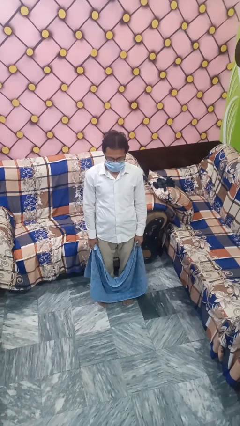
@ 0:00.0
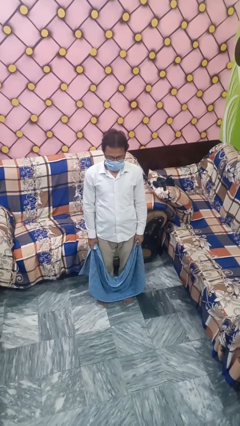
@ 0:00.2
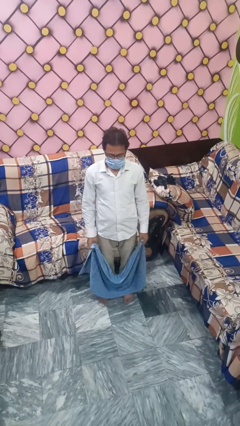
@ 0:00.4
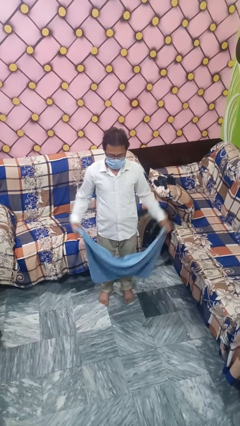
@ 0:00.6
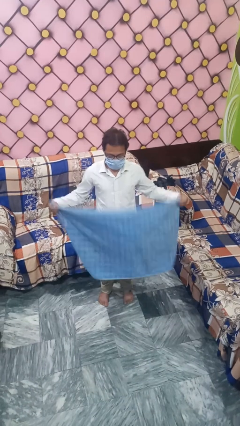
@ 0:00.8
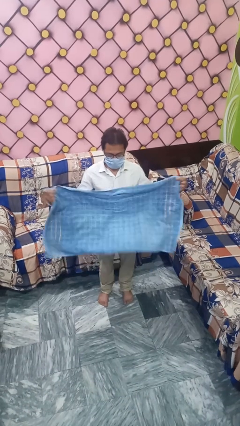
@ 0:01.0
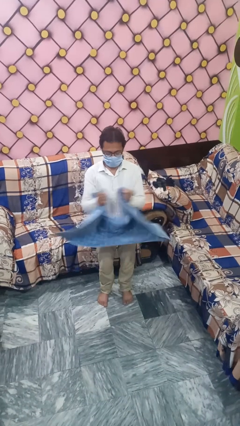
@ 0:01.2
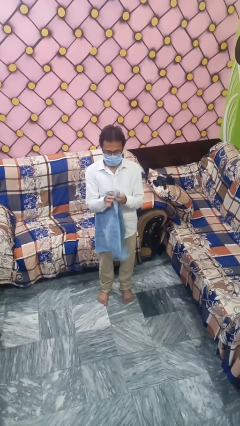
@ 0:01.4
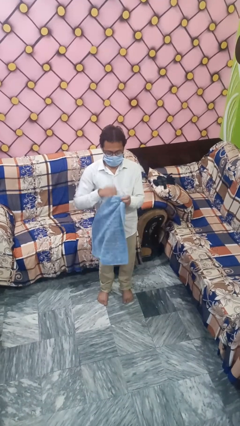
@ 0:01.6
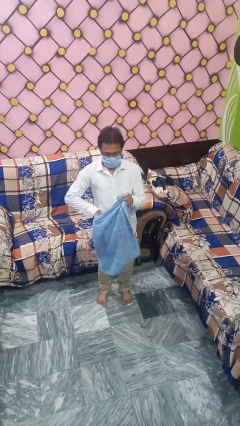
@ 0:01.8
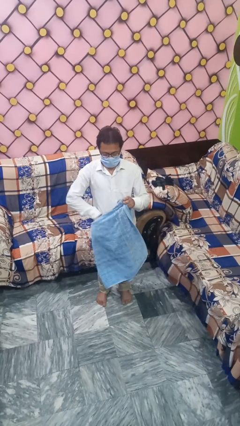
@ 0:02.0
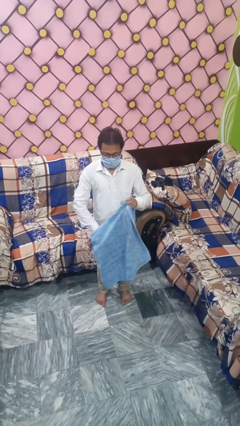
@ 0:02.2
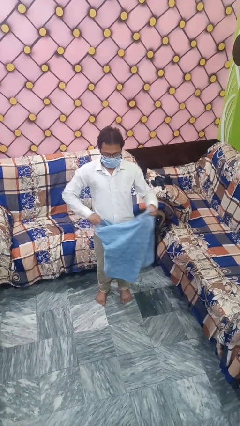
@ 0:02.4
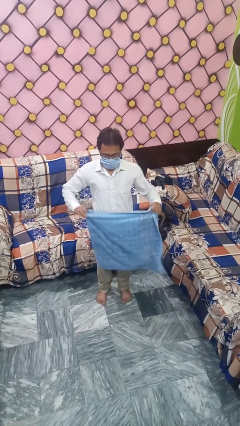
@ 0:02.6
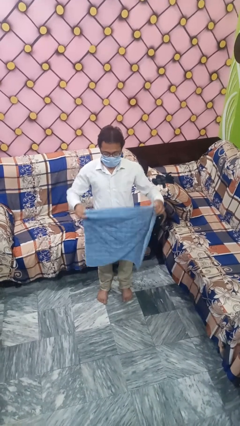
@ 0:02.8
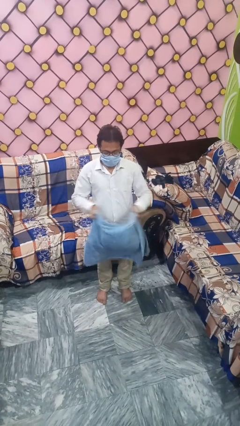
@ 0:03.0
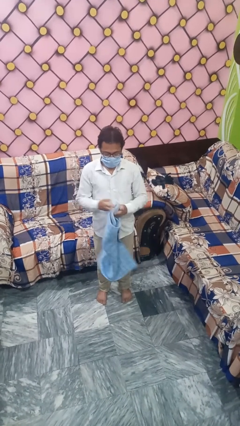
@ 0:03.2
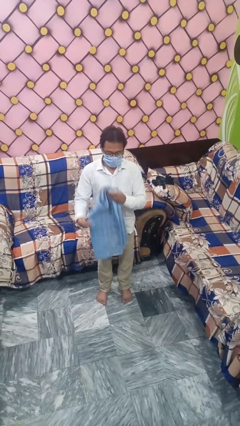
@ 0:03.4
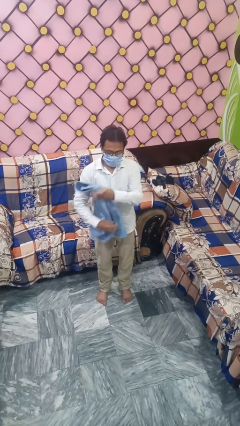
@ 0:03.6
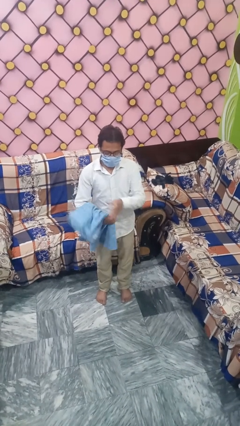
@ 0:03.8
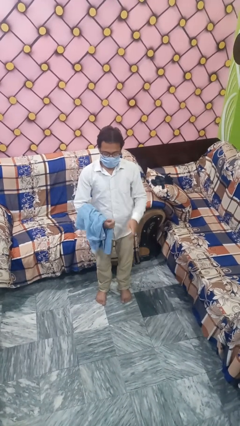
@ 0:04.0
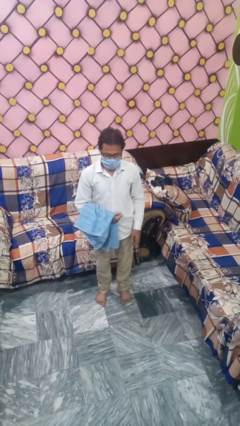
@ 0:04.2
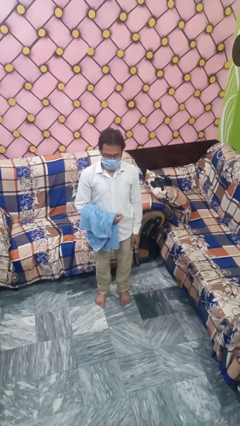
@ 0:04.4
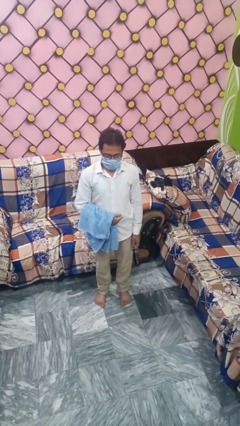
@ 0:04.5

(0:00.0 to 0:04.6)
person folds towel

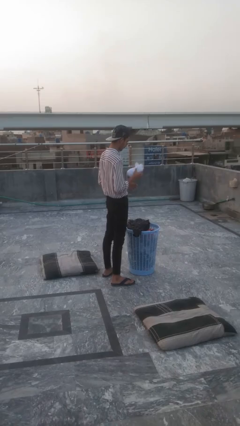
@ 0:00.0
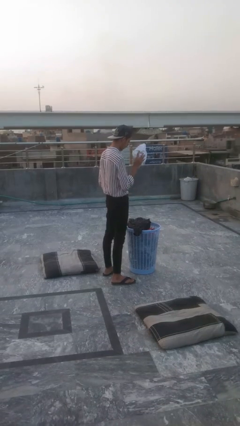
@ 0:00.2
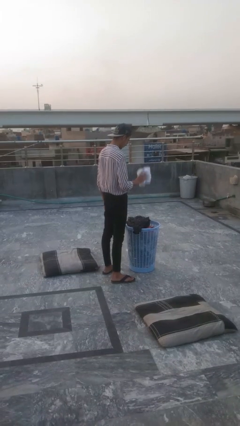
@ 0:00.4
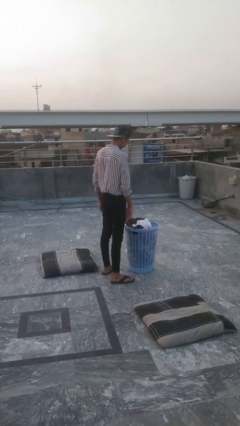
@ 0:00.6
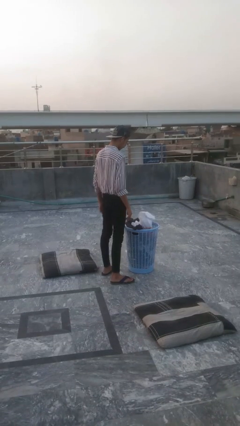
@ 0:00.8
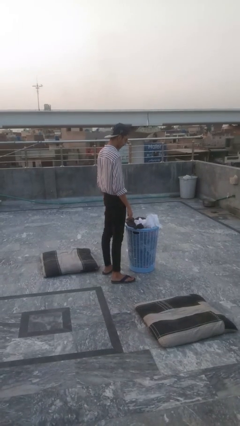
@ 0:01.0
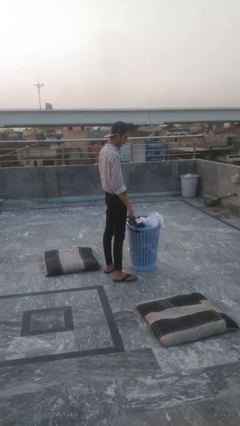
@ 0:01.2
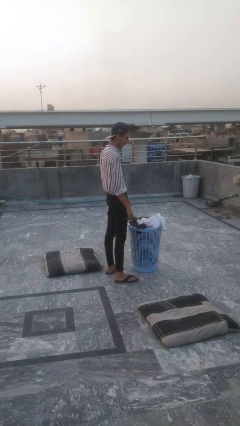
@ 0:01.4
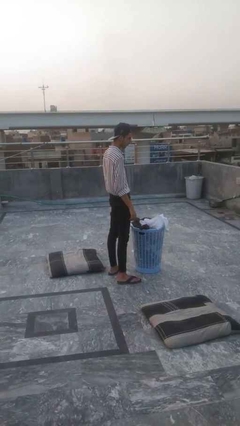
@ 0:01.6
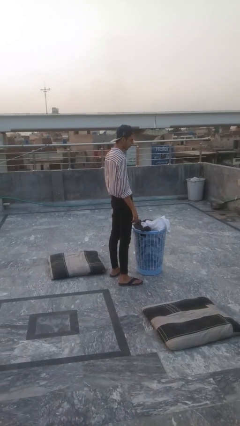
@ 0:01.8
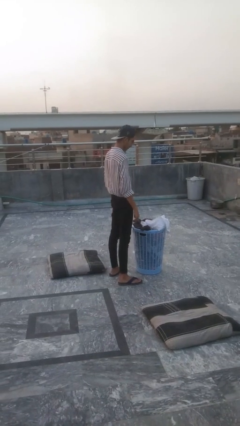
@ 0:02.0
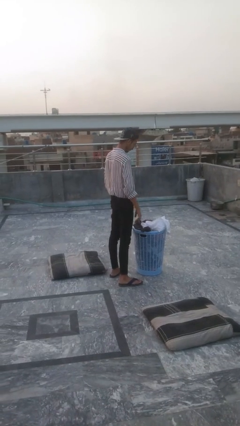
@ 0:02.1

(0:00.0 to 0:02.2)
person puts object into basket

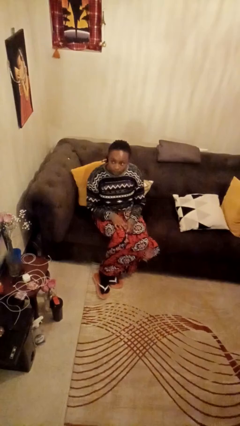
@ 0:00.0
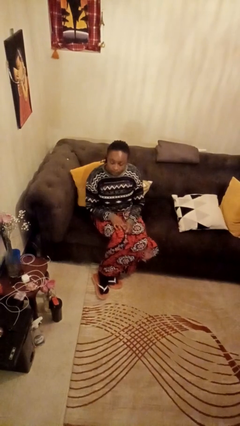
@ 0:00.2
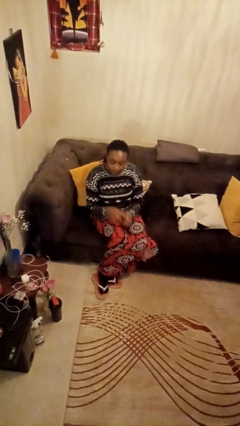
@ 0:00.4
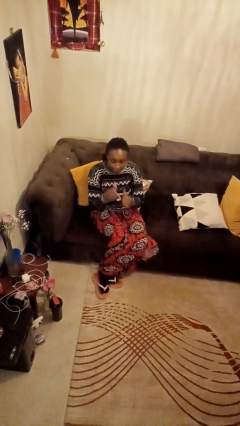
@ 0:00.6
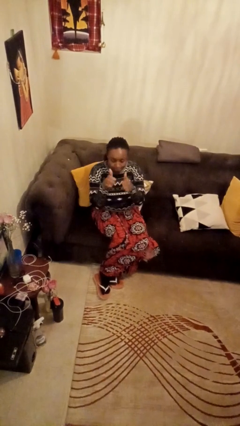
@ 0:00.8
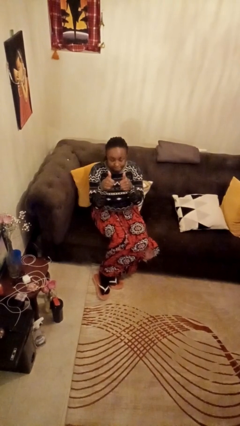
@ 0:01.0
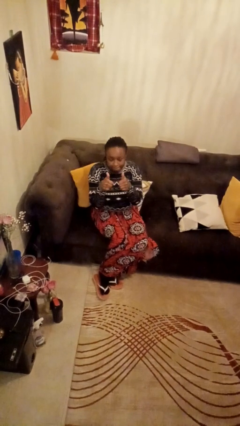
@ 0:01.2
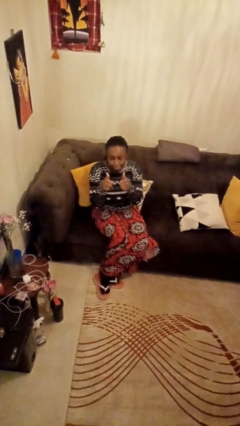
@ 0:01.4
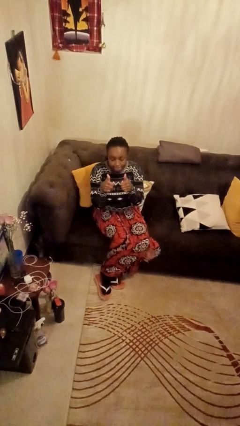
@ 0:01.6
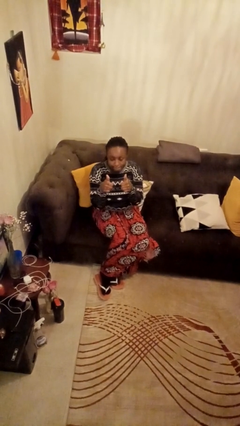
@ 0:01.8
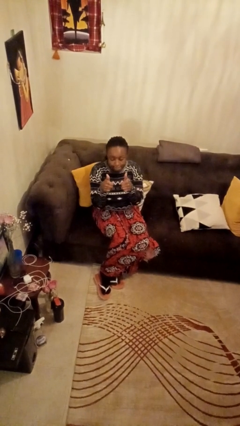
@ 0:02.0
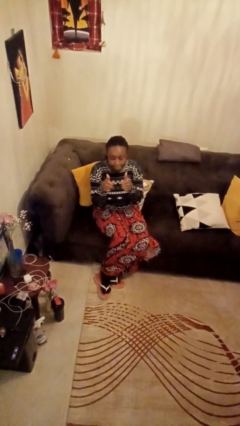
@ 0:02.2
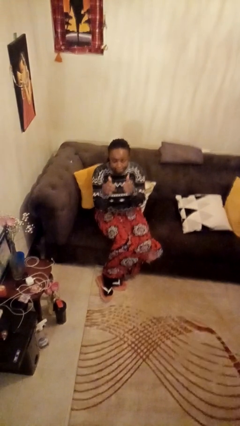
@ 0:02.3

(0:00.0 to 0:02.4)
person gestures thumbs up

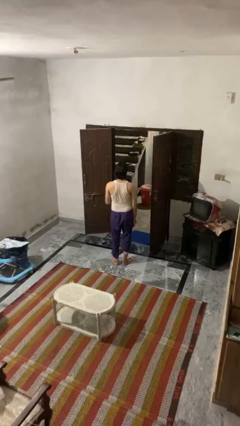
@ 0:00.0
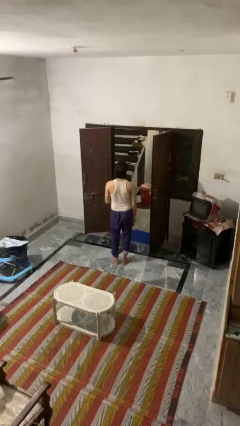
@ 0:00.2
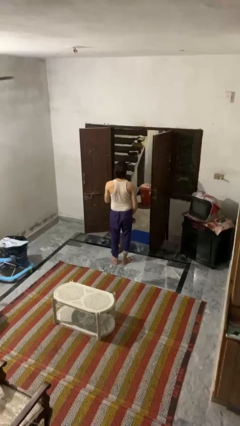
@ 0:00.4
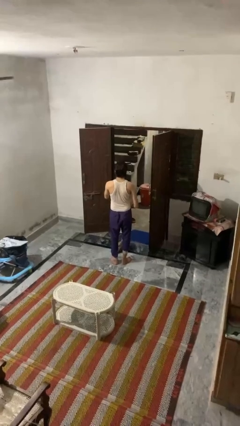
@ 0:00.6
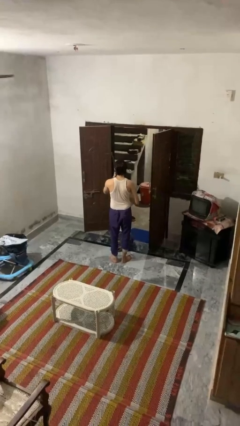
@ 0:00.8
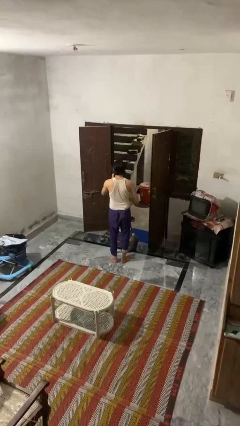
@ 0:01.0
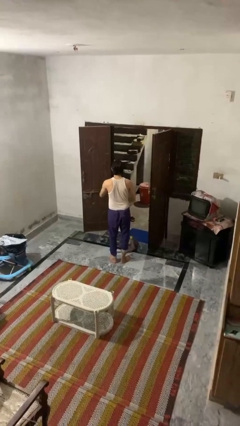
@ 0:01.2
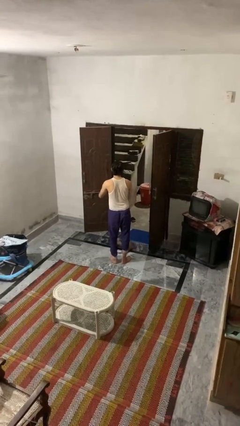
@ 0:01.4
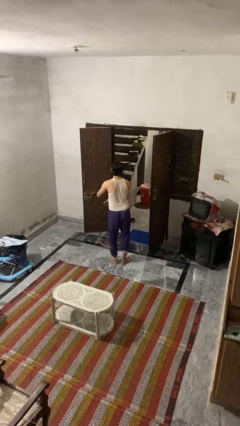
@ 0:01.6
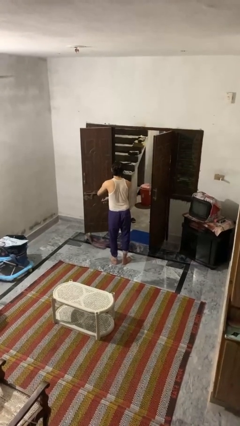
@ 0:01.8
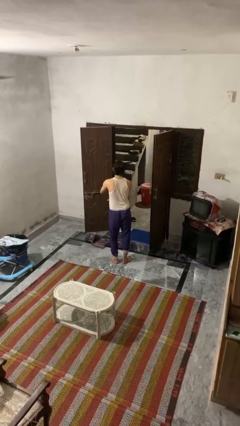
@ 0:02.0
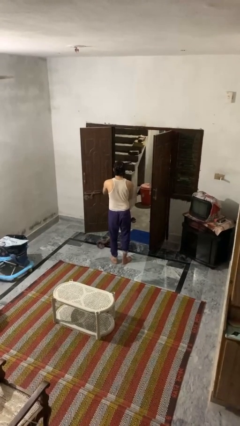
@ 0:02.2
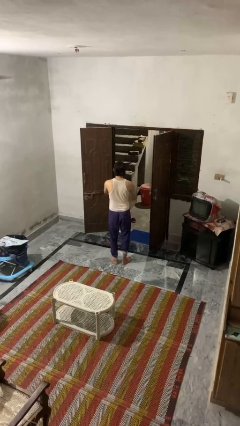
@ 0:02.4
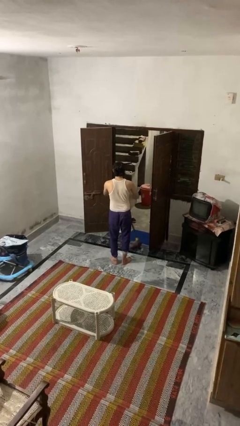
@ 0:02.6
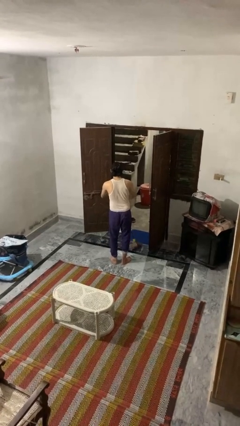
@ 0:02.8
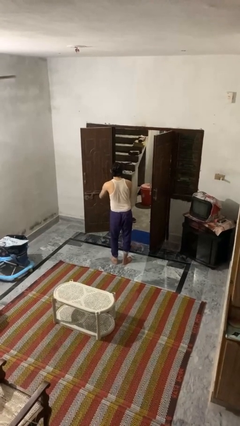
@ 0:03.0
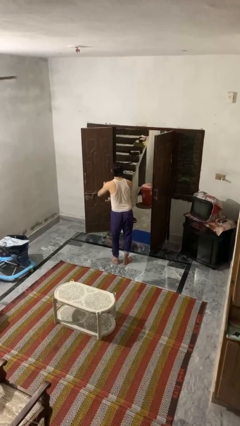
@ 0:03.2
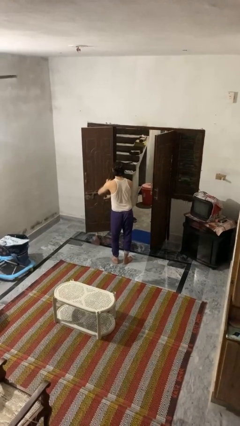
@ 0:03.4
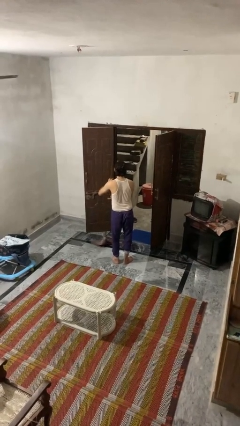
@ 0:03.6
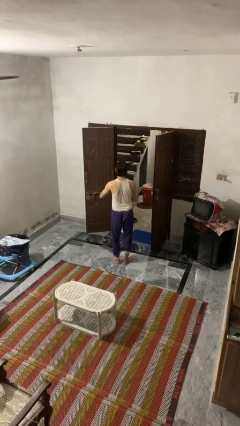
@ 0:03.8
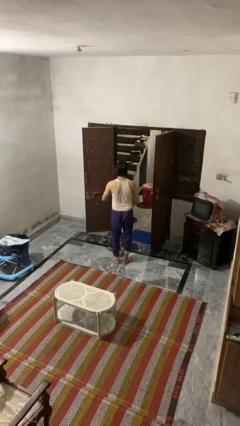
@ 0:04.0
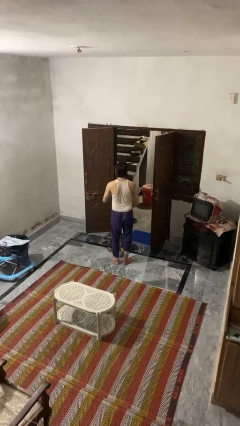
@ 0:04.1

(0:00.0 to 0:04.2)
person mops

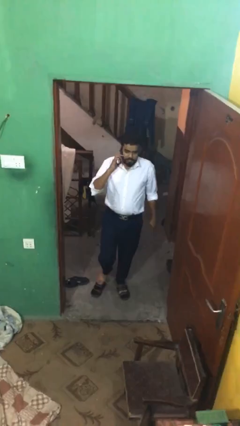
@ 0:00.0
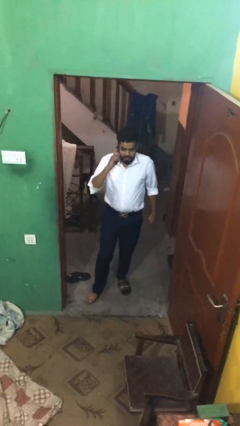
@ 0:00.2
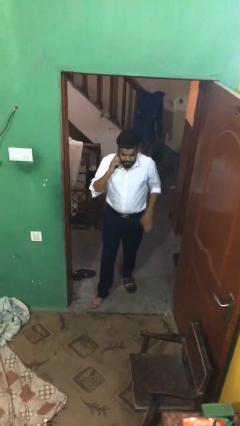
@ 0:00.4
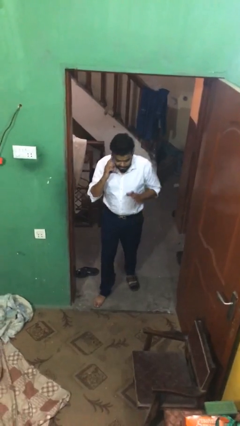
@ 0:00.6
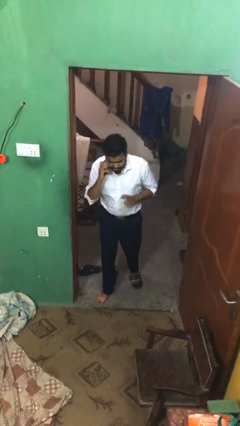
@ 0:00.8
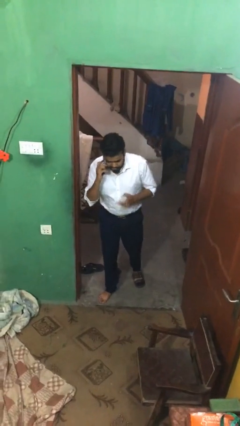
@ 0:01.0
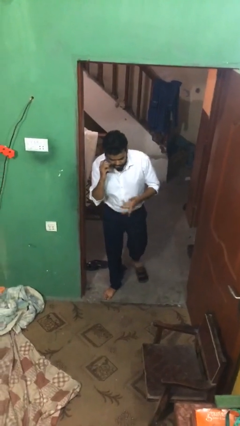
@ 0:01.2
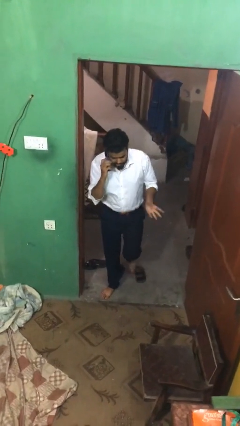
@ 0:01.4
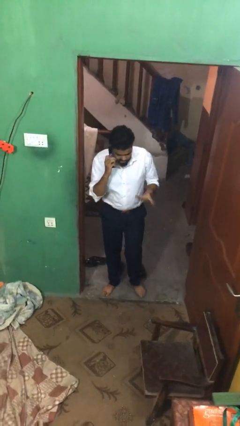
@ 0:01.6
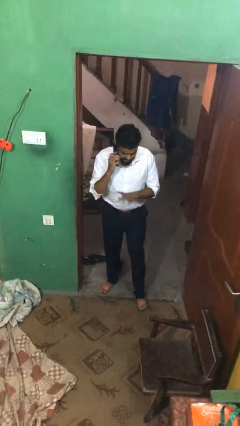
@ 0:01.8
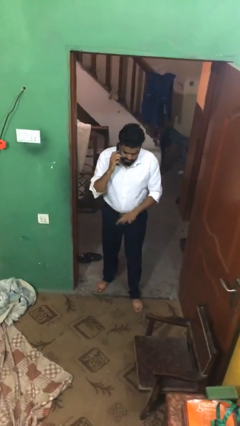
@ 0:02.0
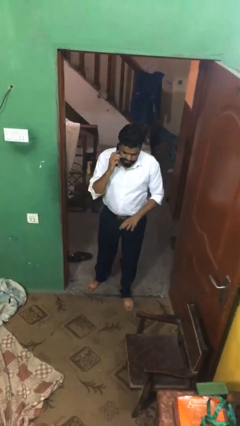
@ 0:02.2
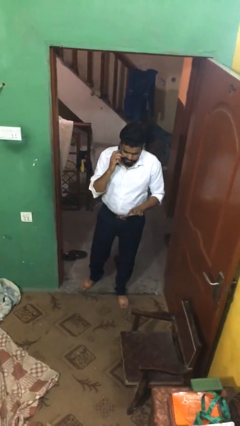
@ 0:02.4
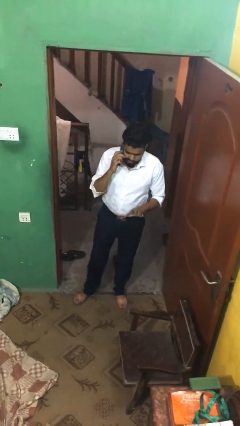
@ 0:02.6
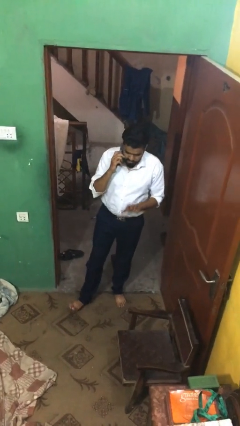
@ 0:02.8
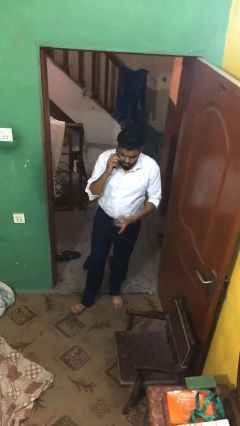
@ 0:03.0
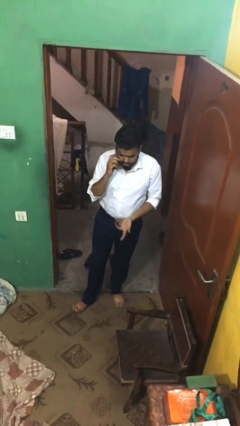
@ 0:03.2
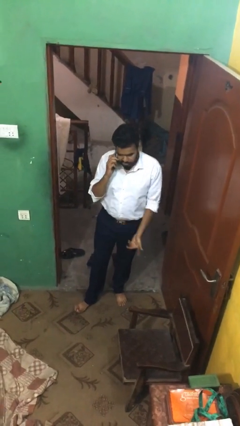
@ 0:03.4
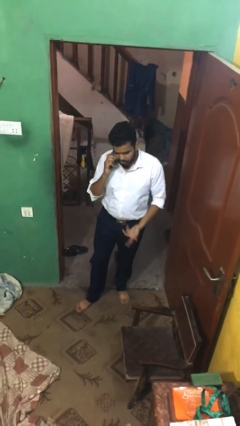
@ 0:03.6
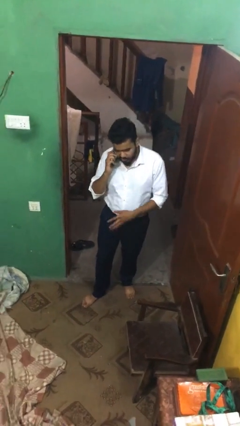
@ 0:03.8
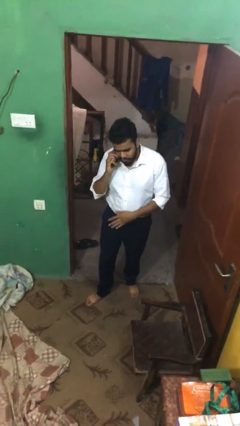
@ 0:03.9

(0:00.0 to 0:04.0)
person talks on phone
